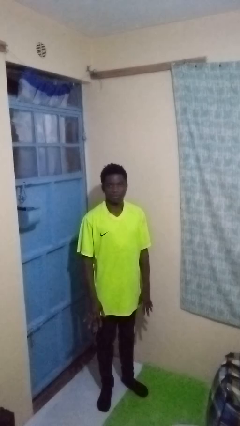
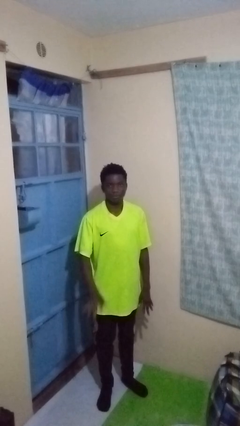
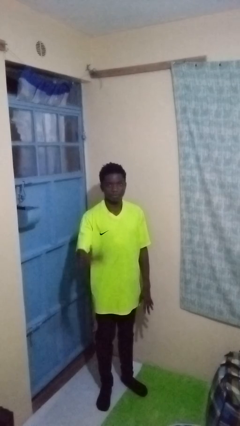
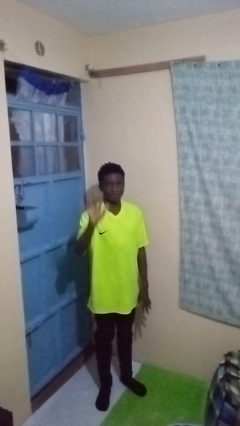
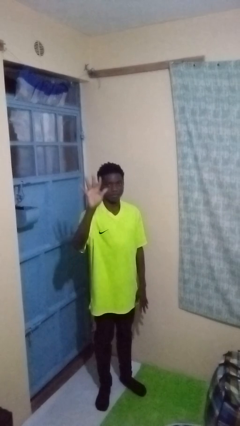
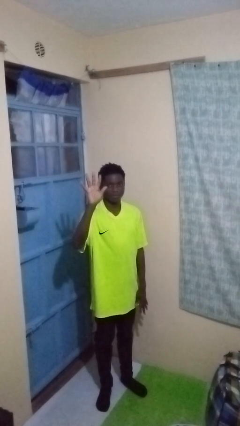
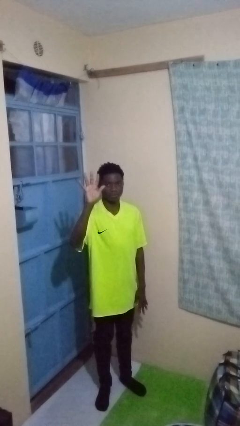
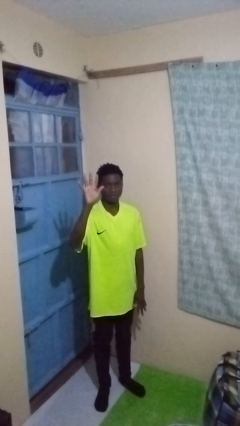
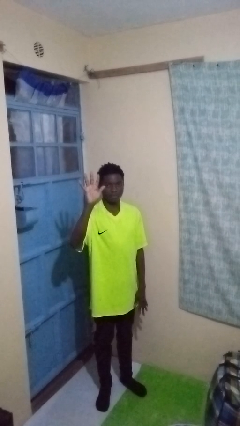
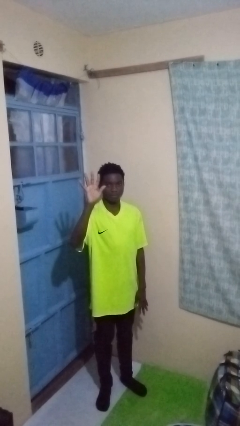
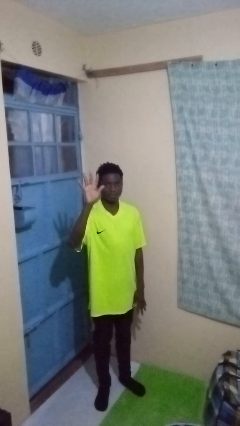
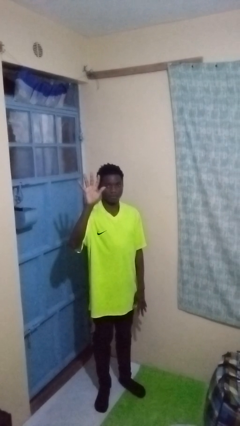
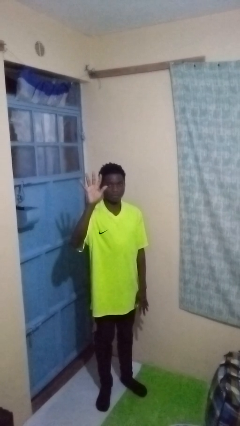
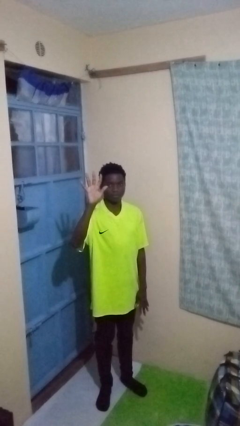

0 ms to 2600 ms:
person gestures number five

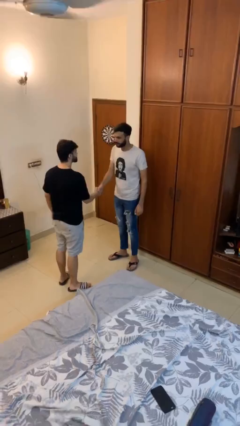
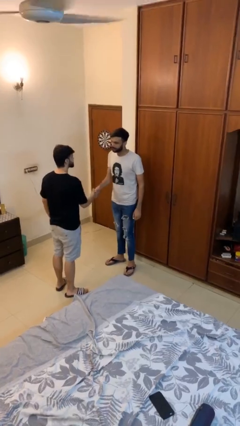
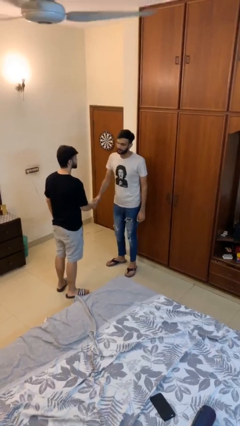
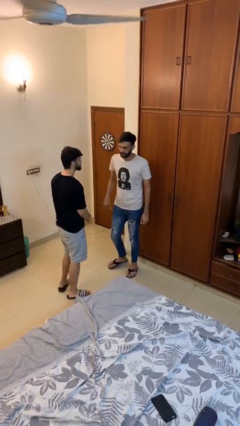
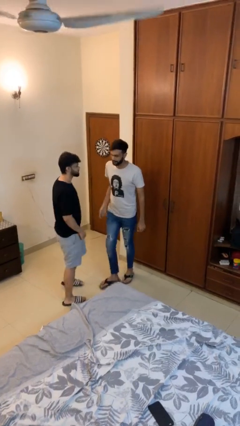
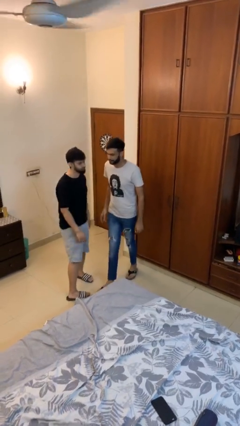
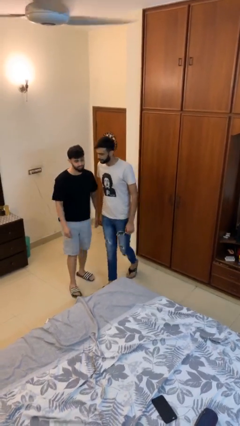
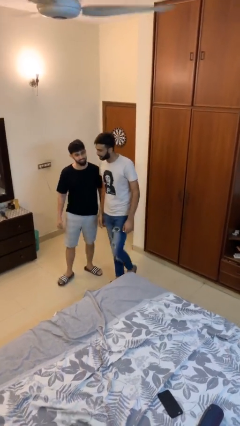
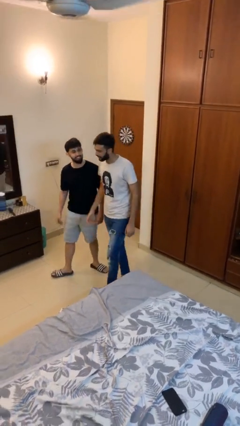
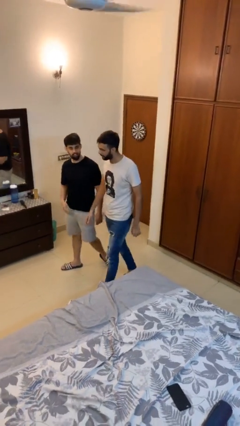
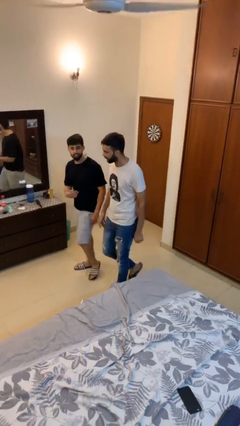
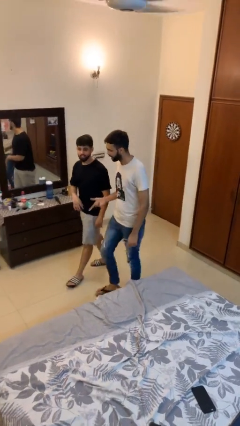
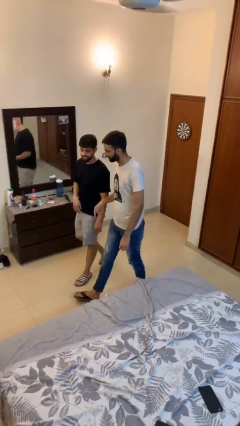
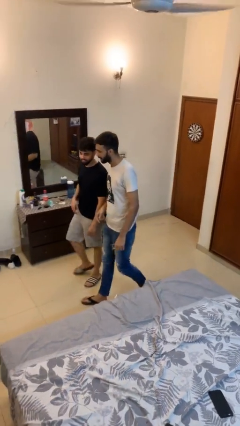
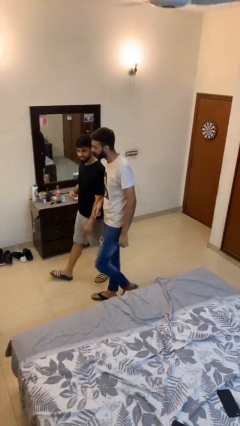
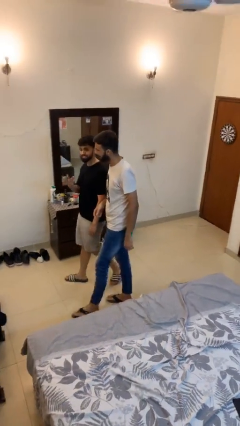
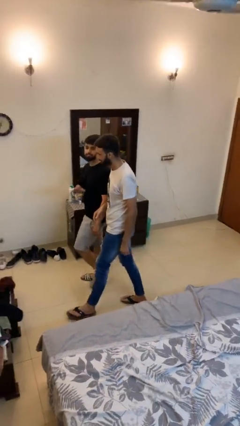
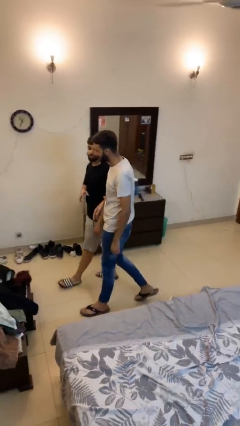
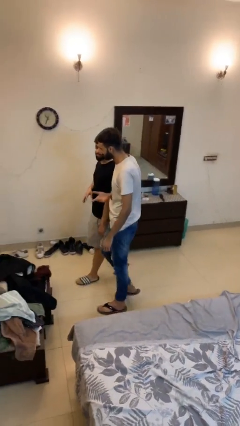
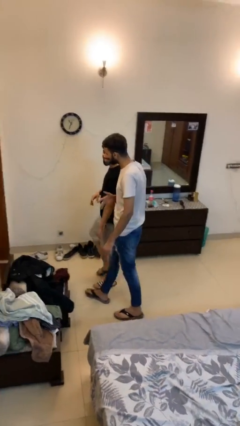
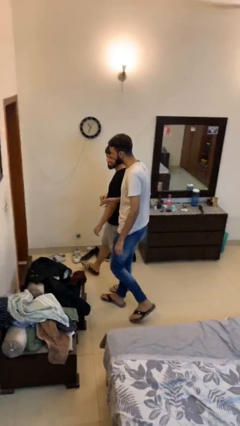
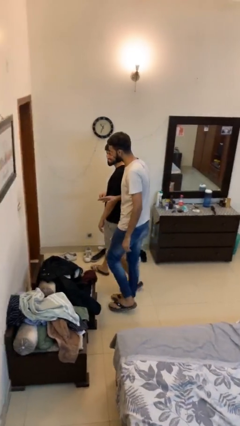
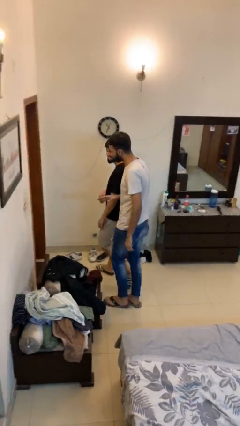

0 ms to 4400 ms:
person talks to person

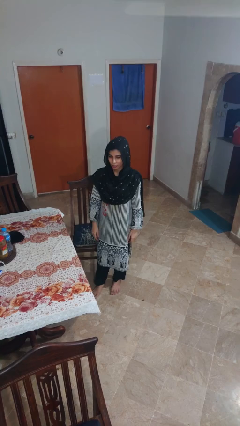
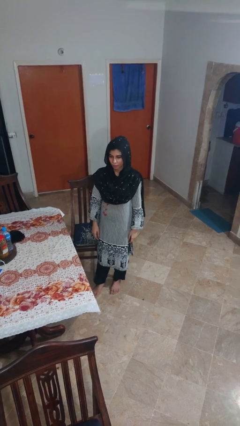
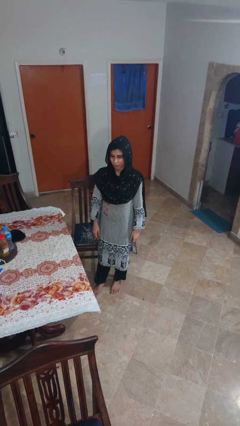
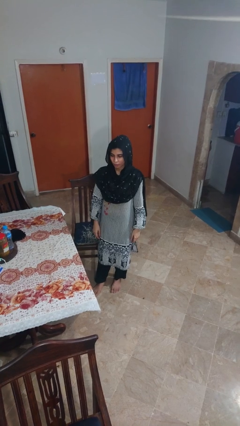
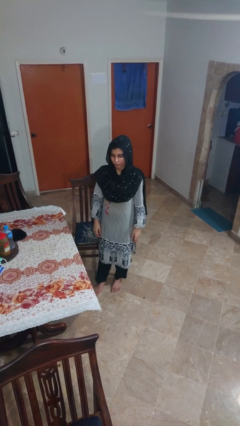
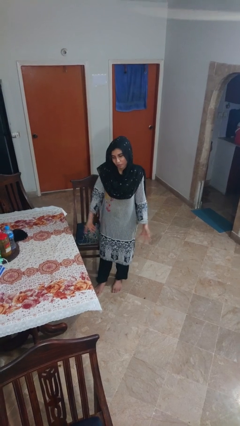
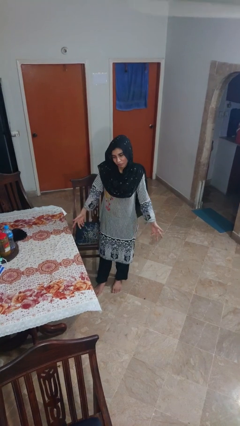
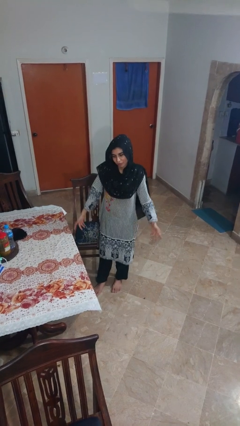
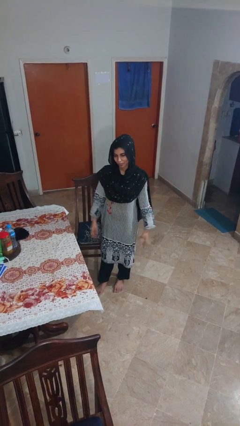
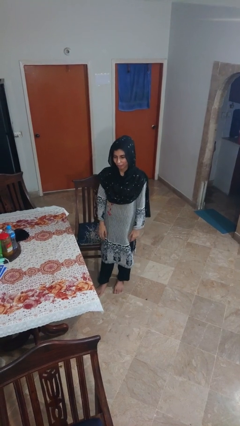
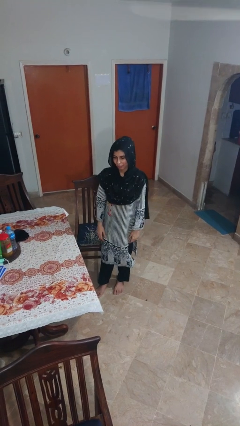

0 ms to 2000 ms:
person shrugs

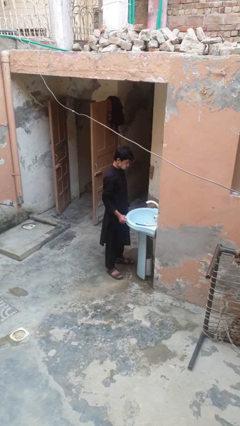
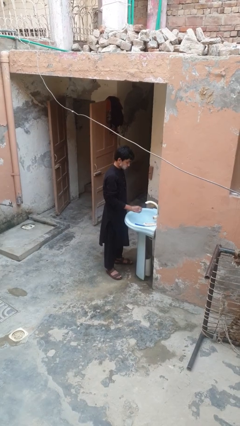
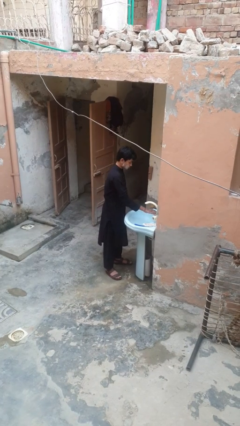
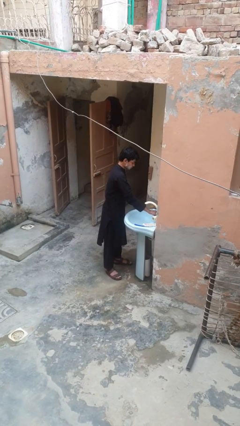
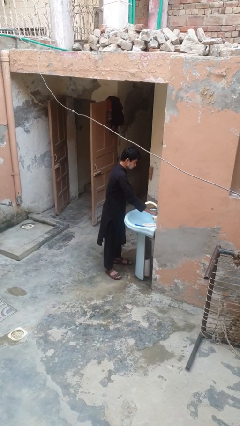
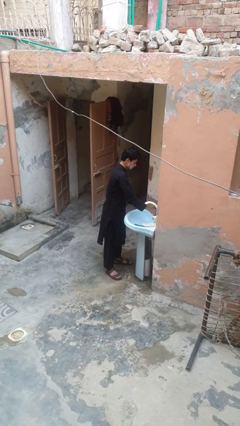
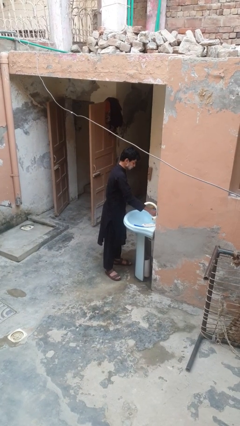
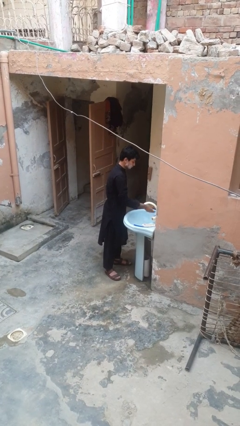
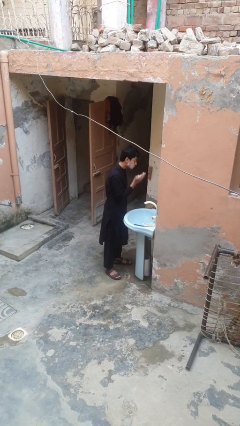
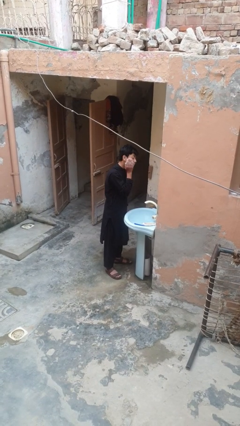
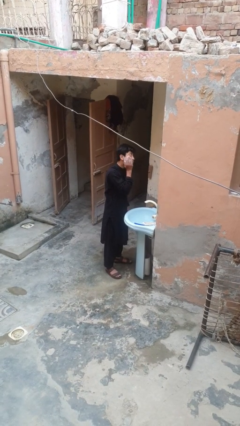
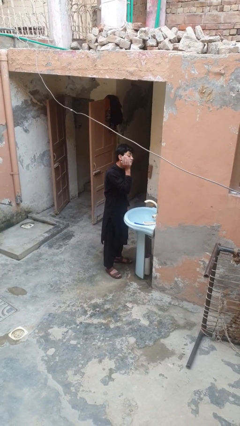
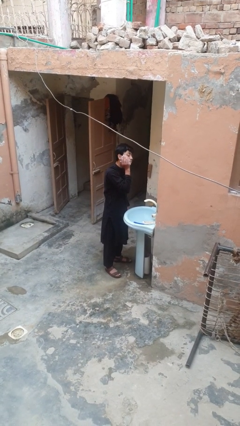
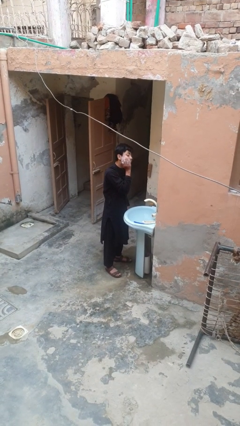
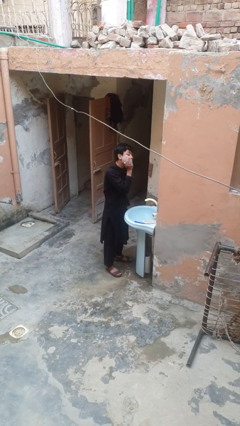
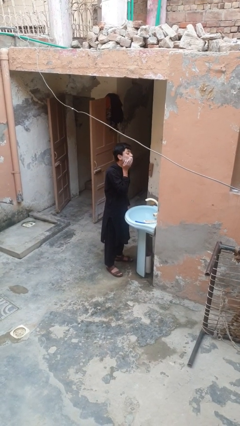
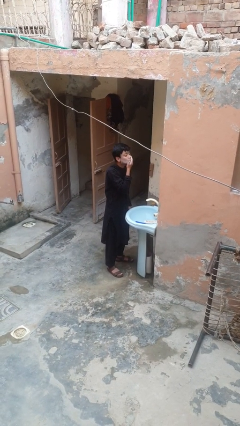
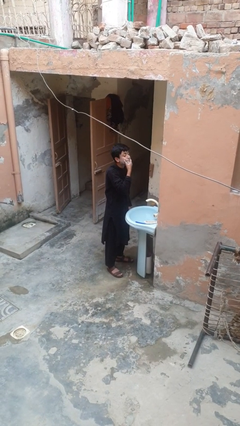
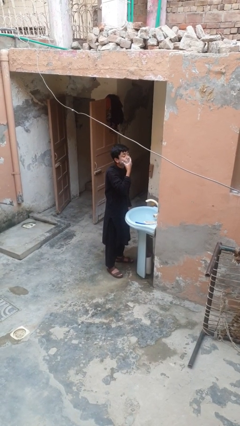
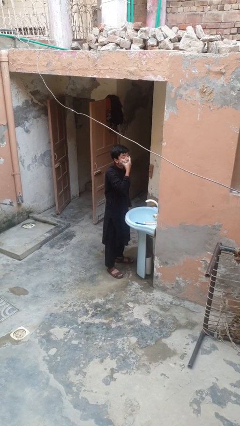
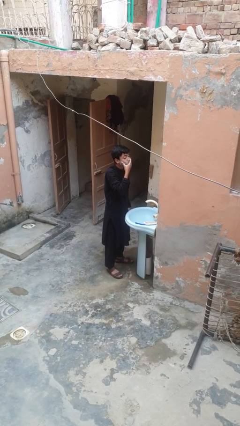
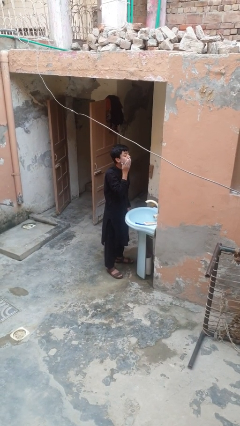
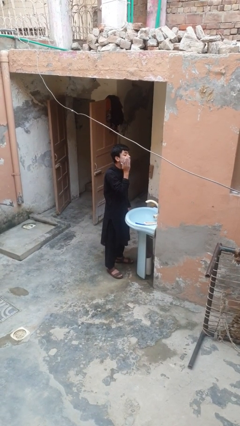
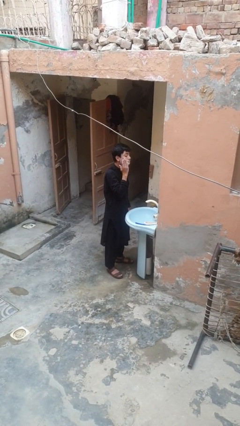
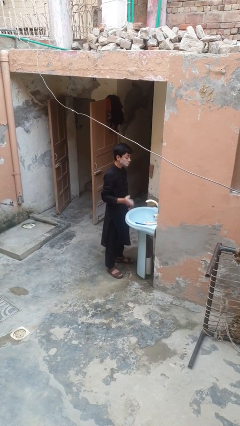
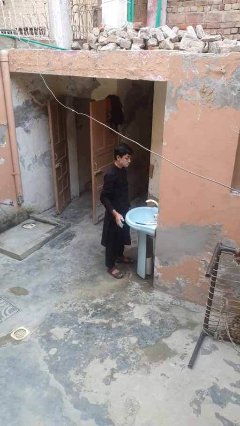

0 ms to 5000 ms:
person applies shaving cream

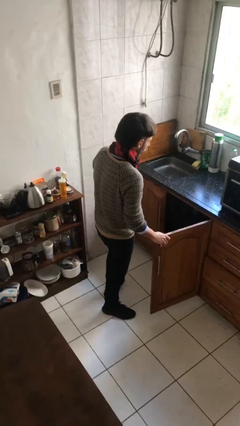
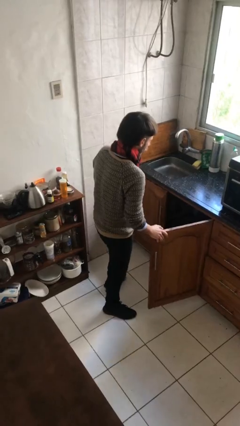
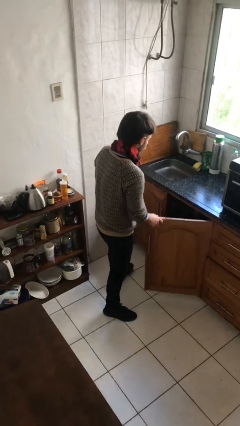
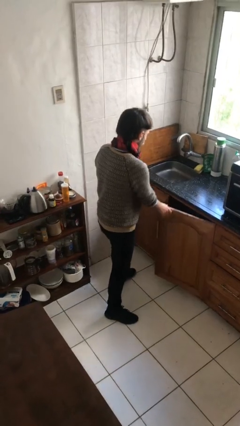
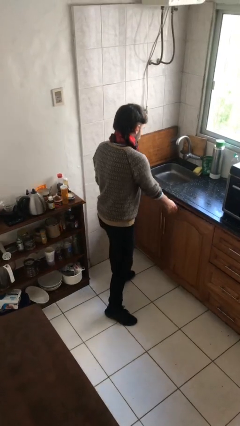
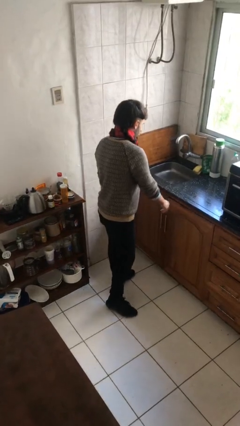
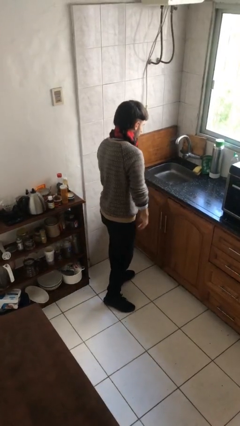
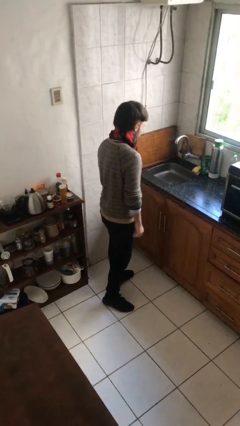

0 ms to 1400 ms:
person closes cabinet

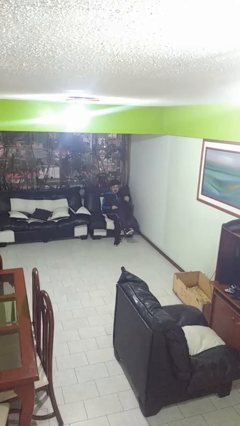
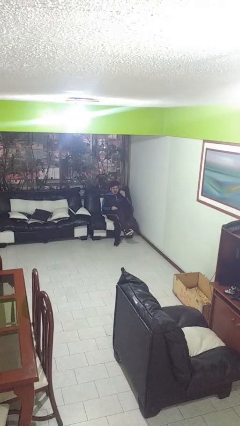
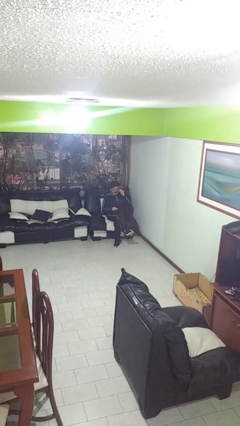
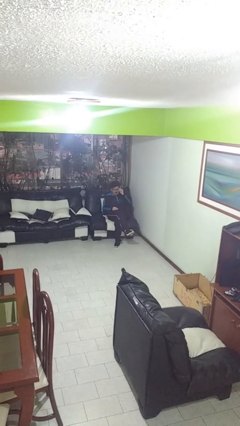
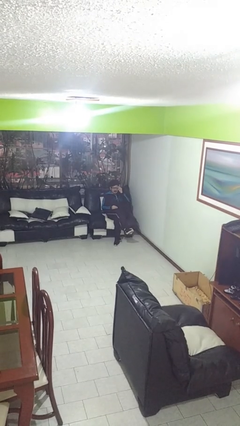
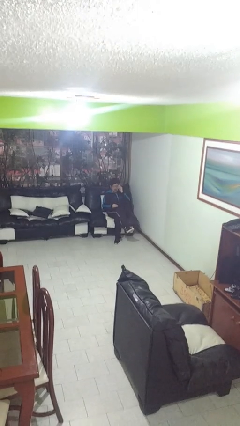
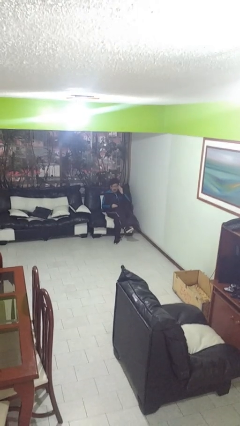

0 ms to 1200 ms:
person puts on glasses

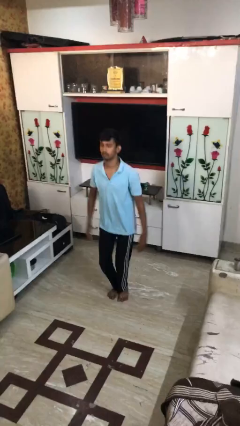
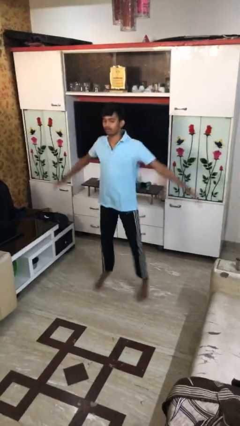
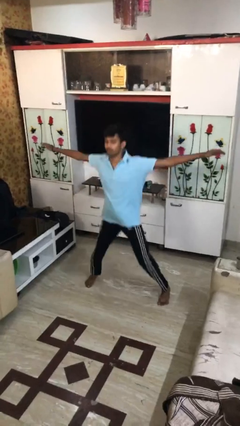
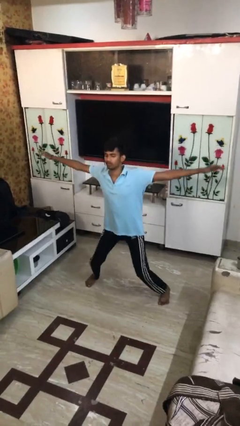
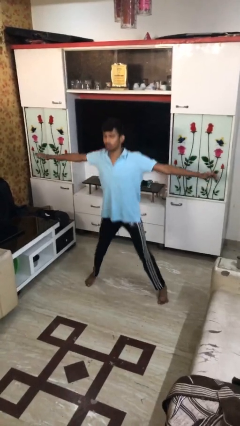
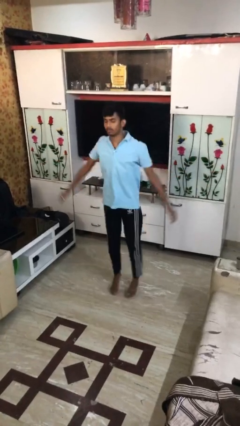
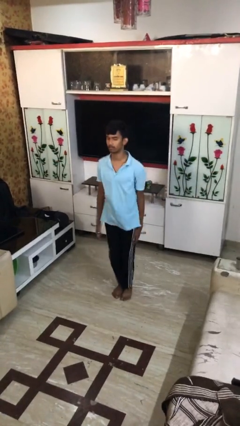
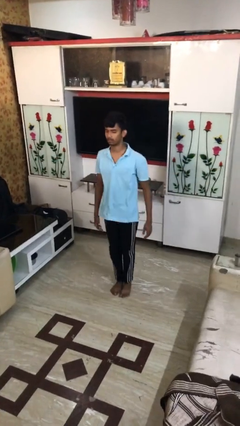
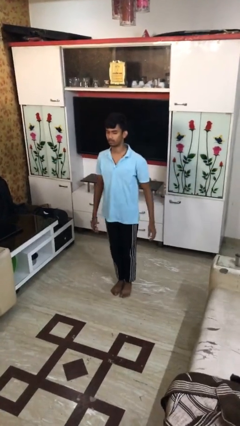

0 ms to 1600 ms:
person exercises with jumping jacks
